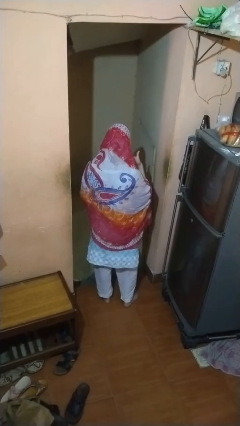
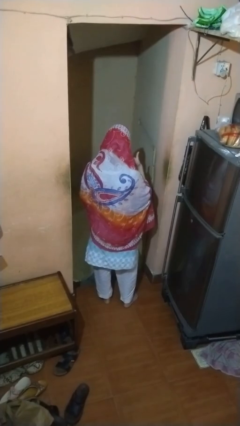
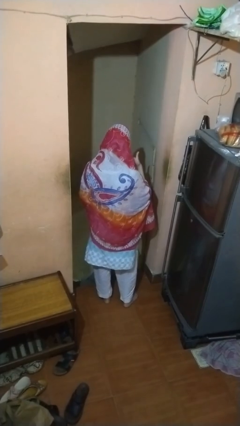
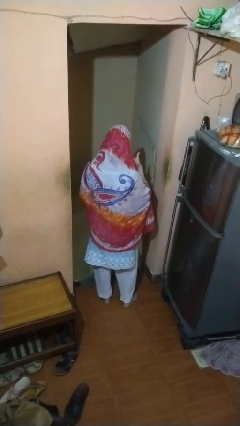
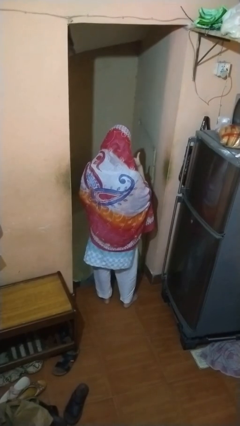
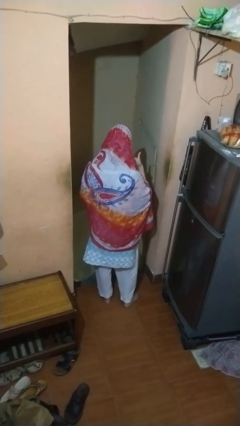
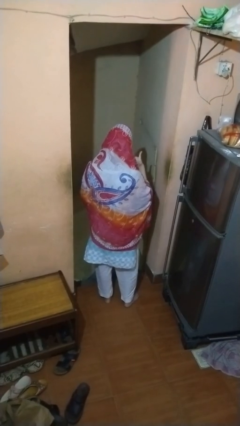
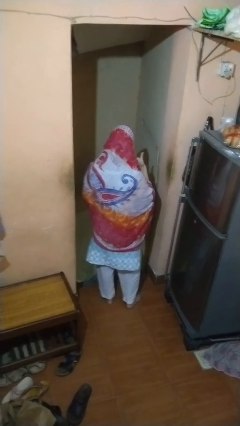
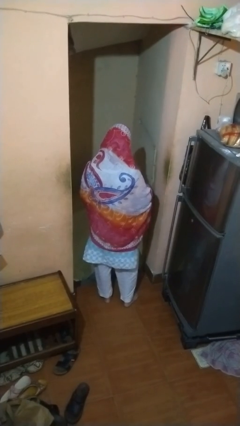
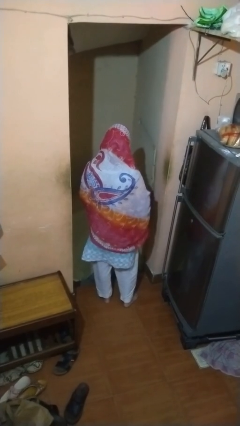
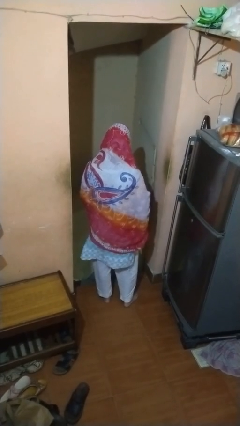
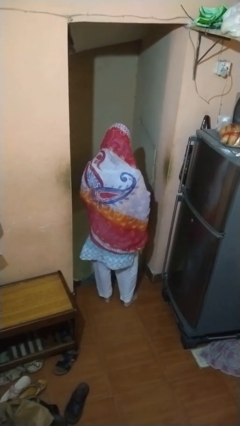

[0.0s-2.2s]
person gestures call me

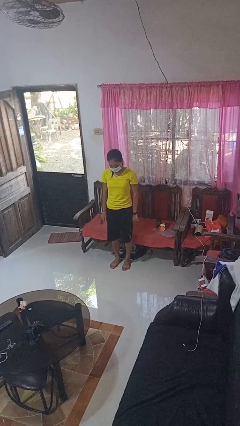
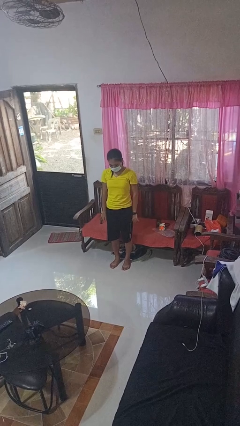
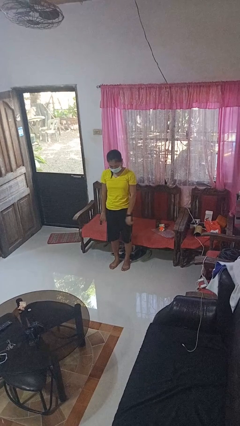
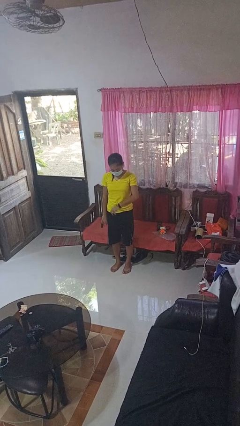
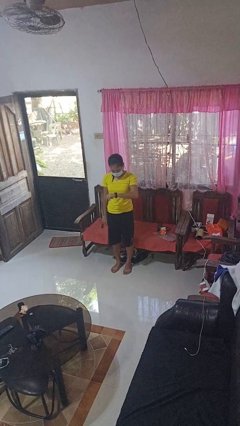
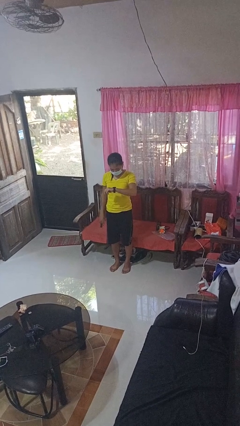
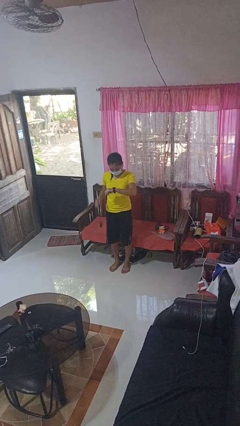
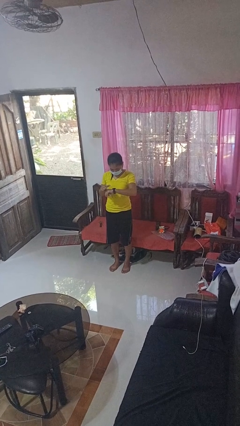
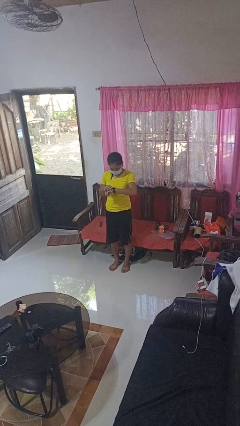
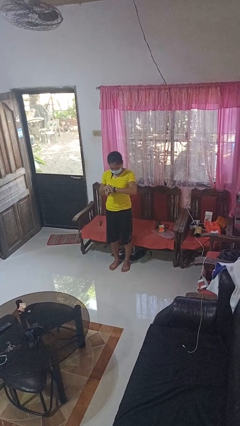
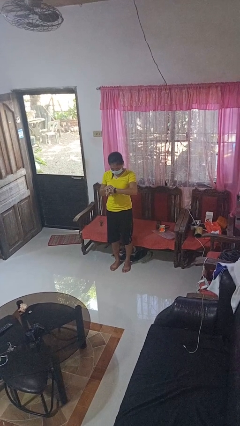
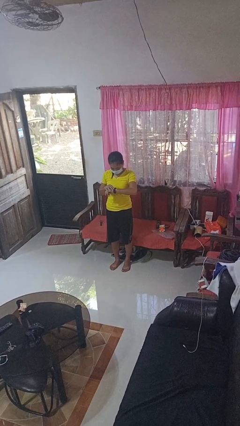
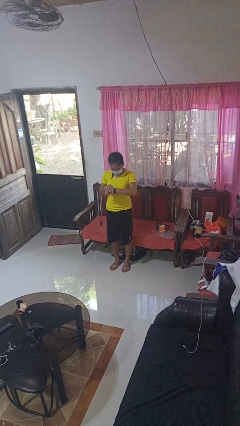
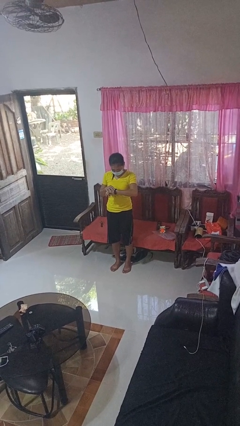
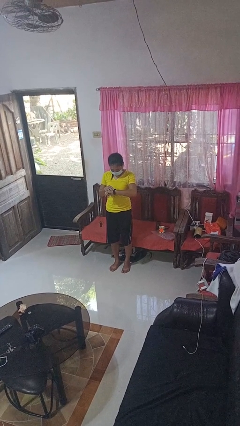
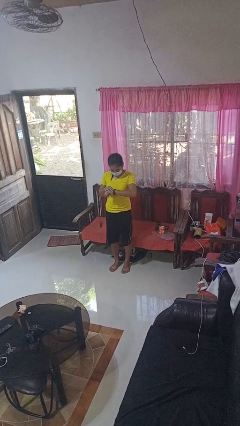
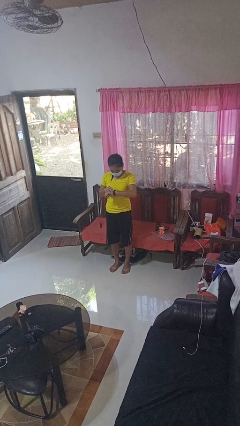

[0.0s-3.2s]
person looks at wristwatch

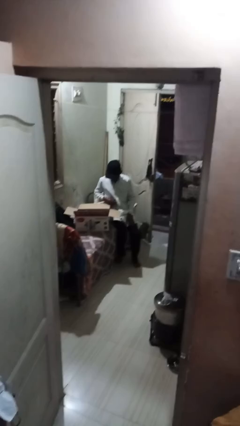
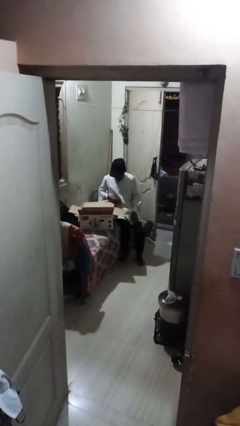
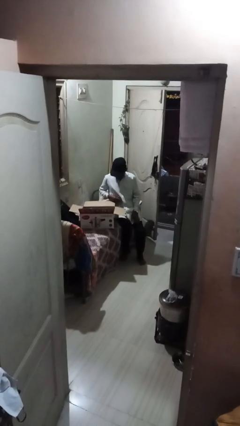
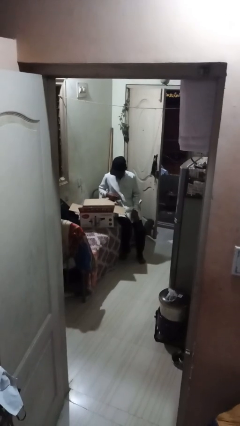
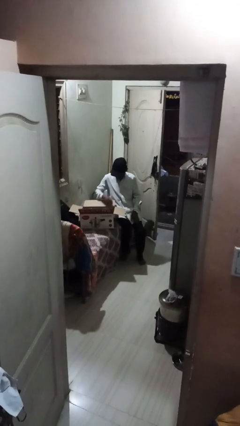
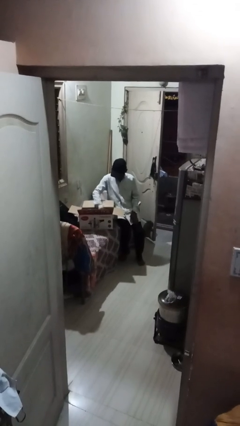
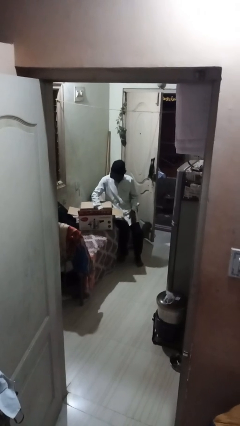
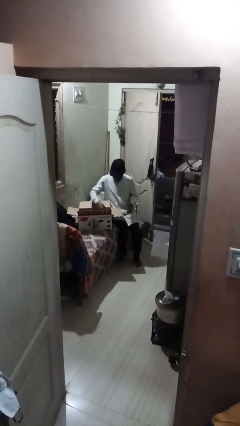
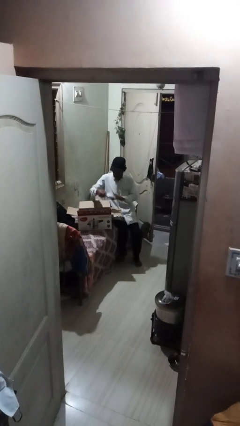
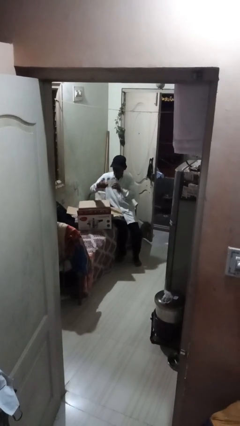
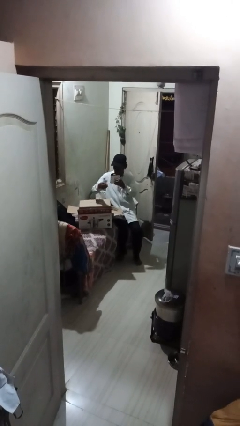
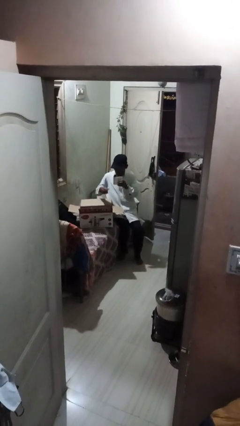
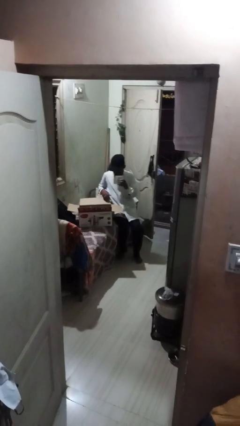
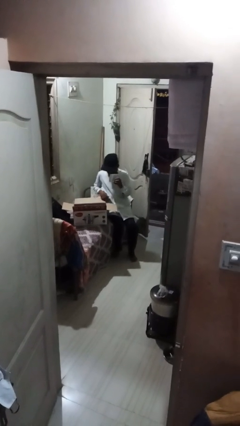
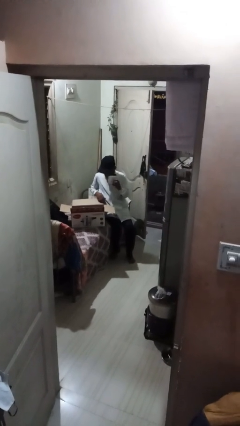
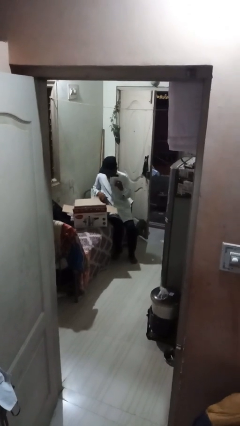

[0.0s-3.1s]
person takes object from box

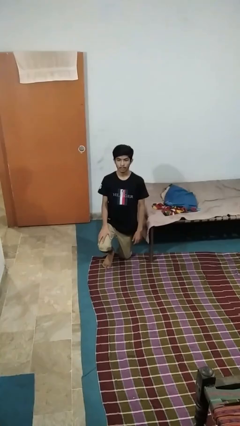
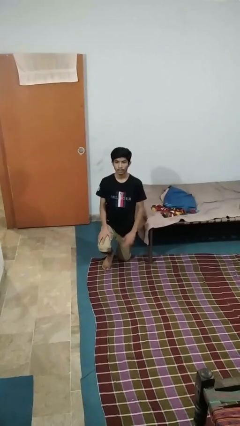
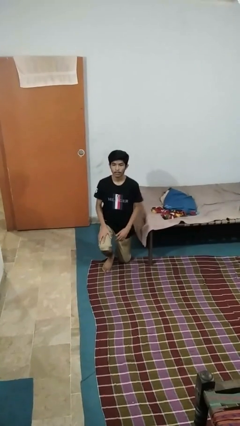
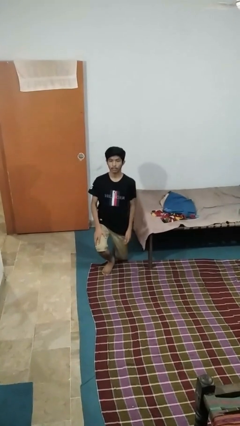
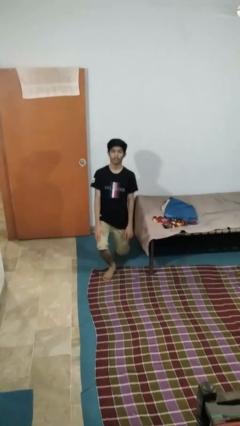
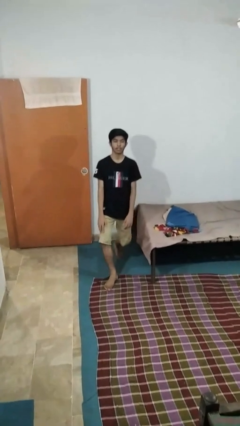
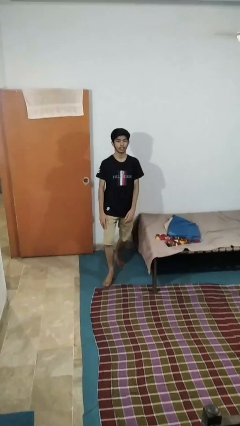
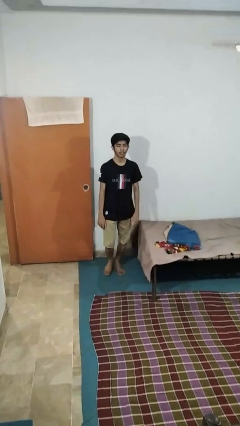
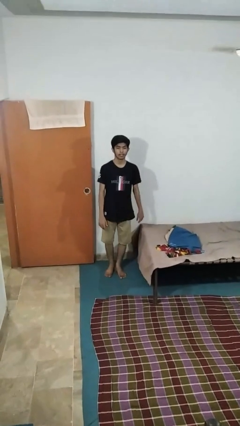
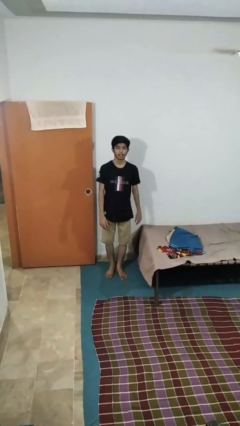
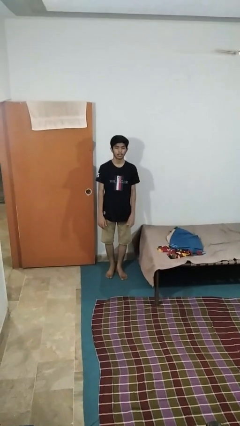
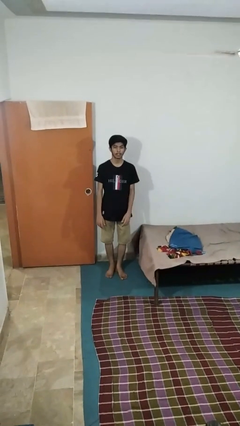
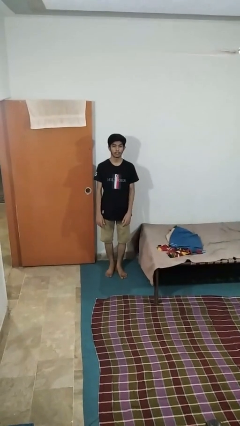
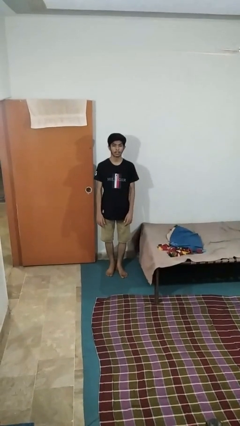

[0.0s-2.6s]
person stands up from floor

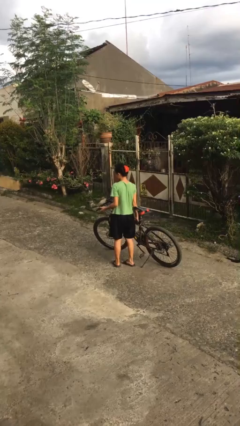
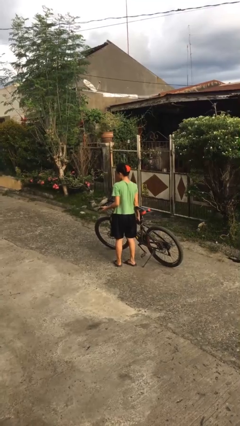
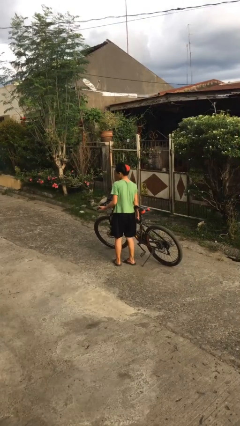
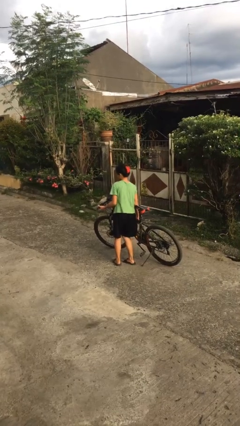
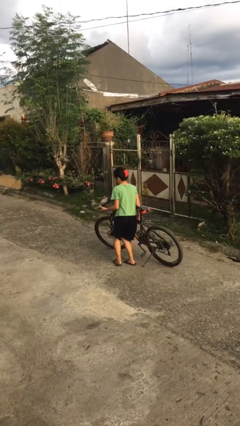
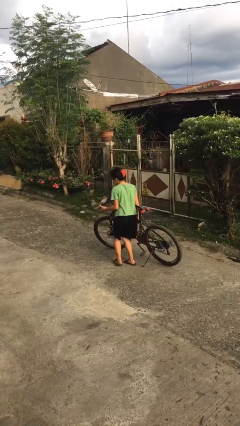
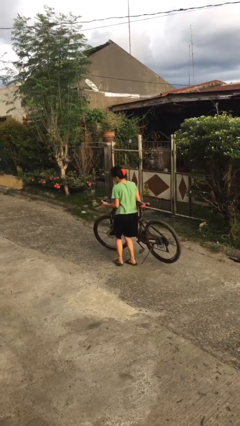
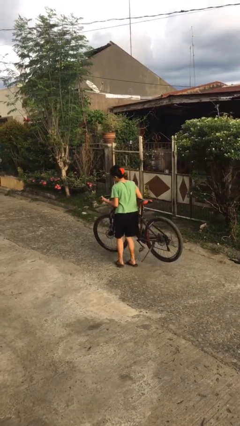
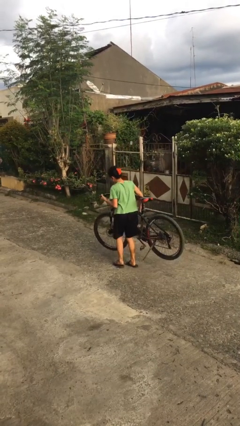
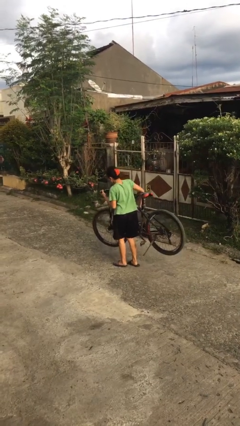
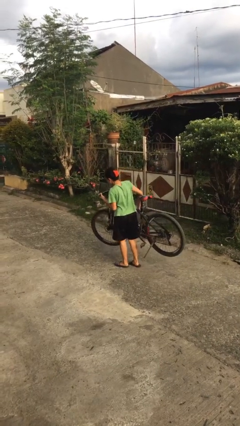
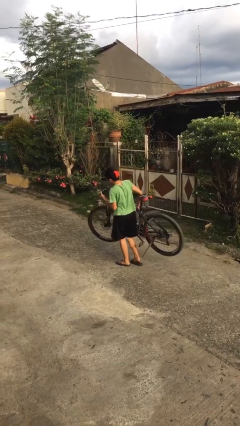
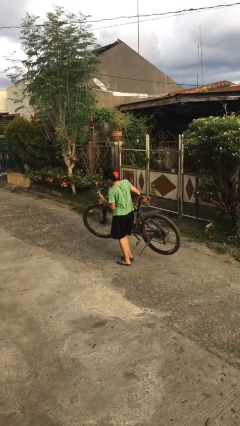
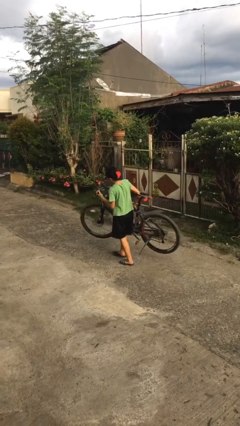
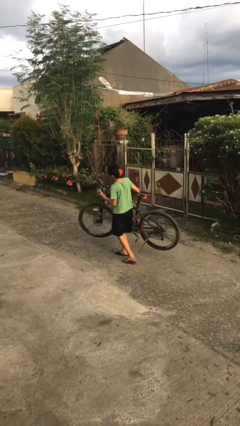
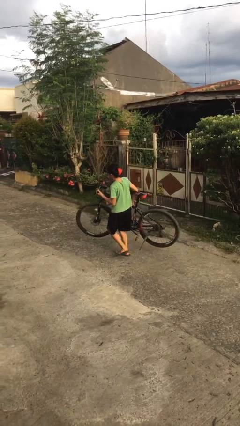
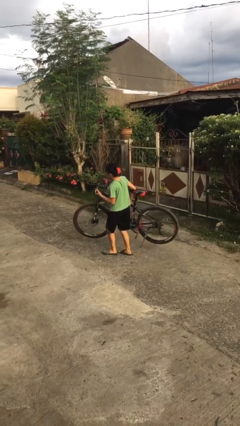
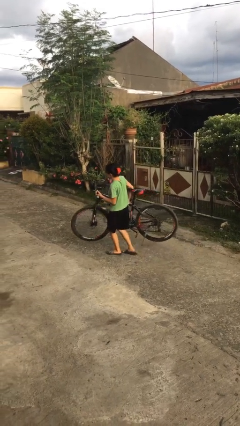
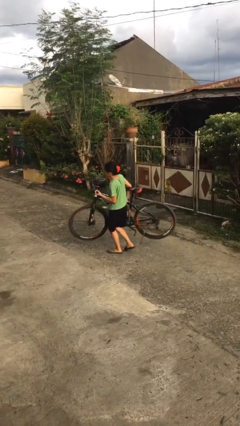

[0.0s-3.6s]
person carries bicycle

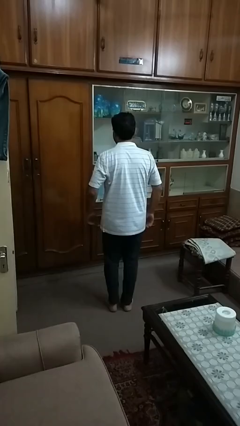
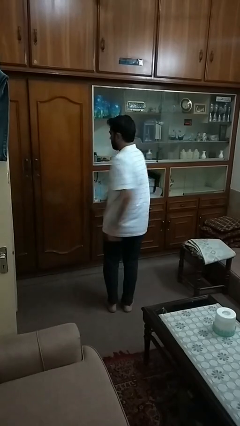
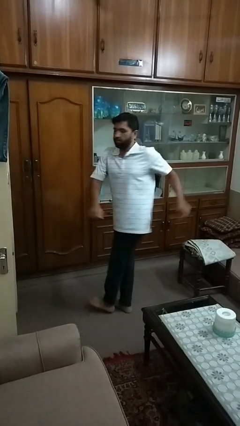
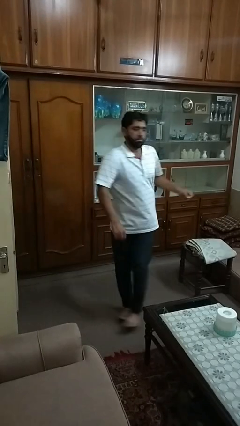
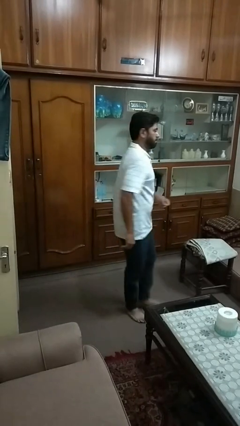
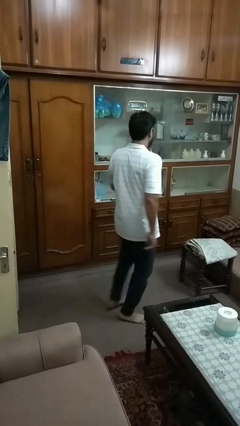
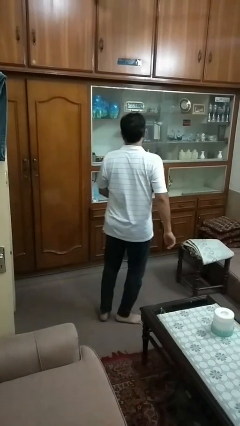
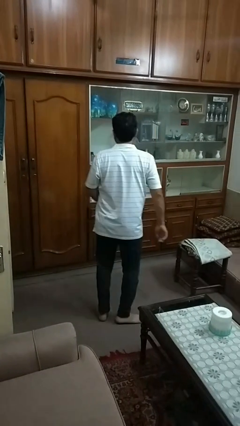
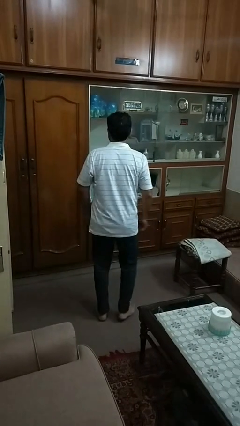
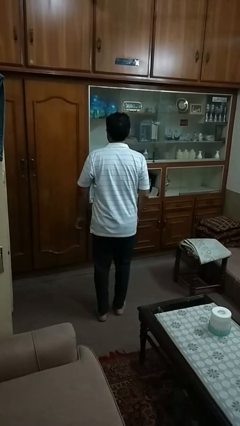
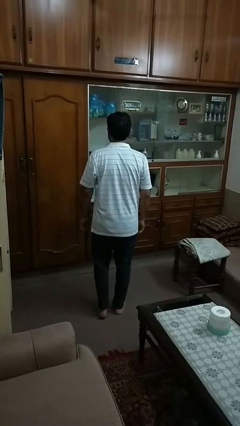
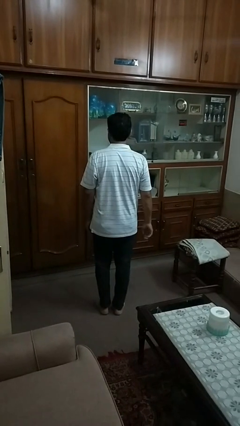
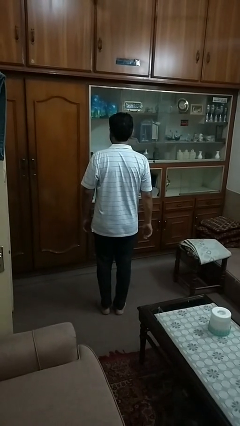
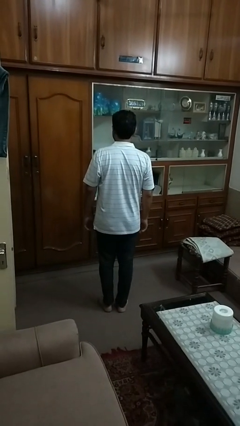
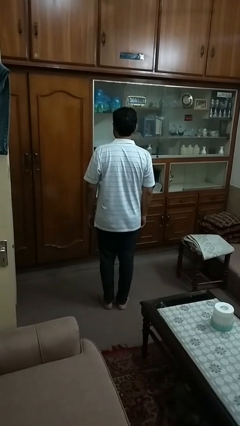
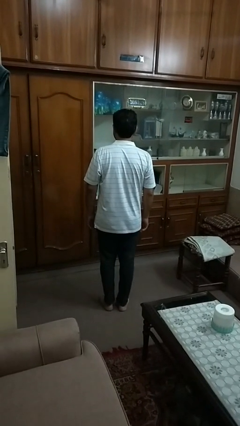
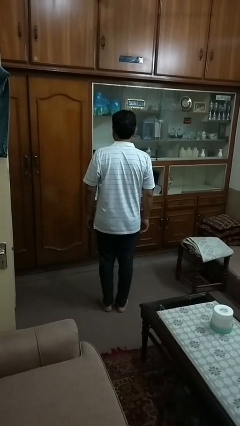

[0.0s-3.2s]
person twirls
